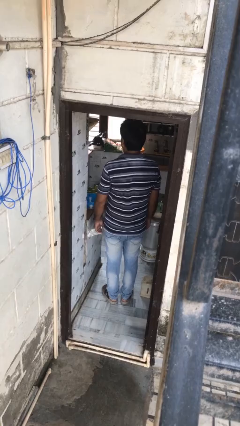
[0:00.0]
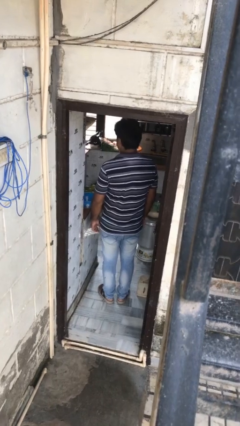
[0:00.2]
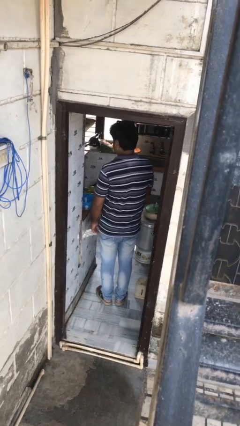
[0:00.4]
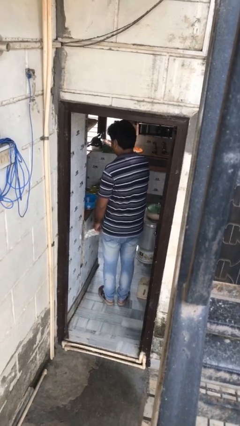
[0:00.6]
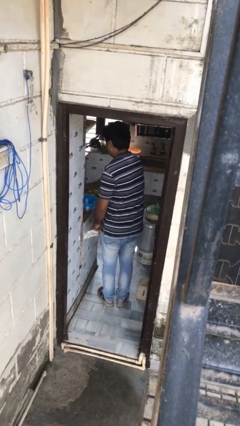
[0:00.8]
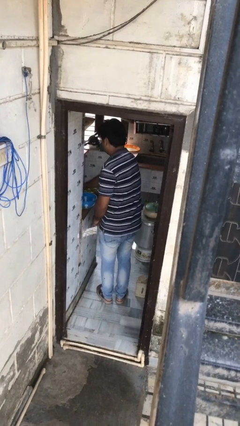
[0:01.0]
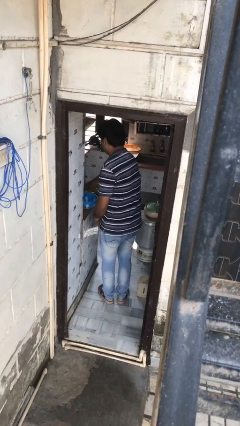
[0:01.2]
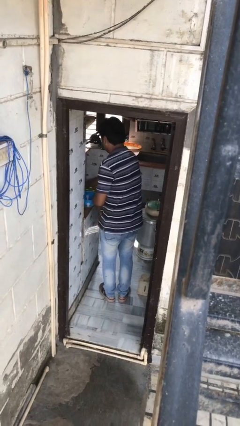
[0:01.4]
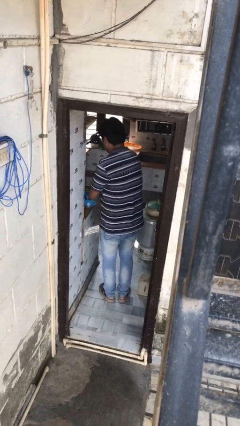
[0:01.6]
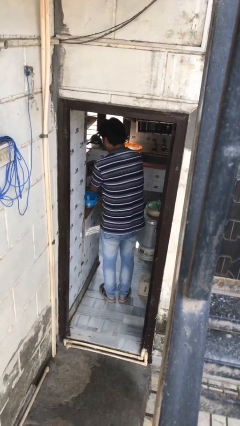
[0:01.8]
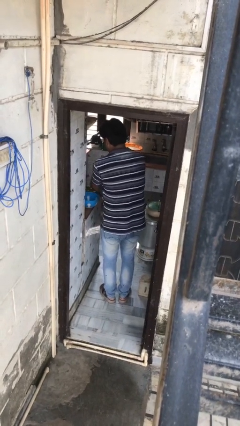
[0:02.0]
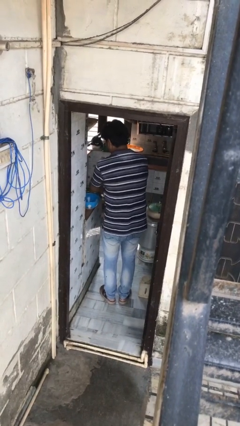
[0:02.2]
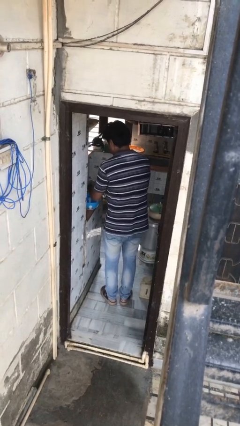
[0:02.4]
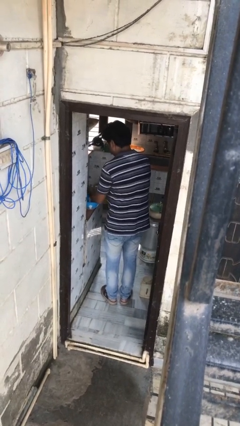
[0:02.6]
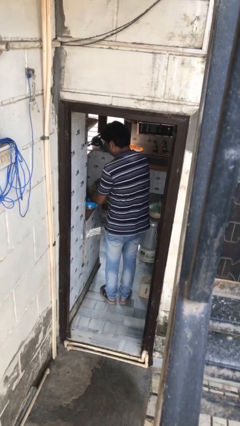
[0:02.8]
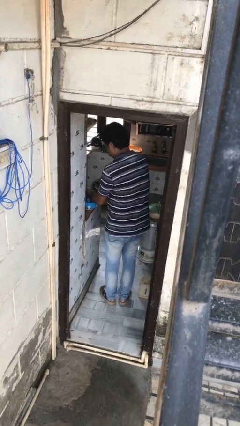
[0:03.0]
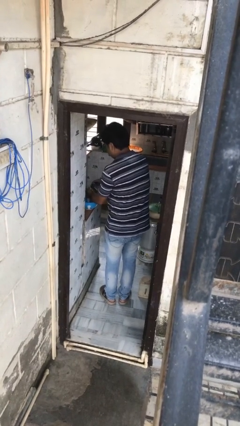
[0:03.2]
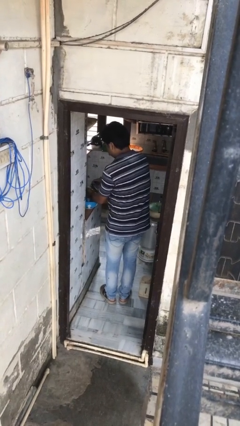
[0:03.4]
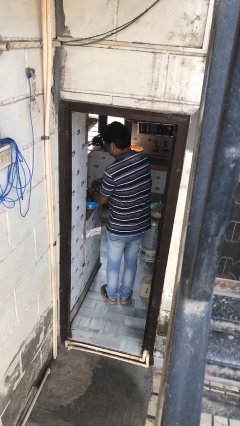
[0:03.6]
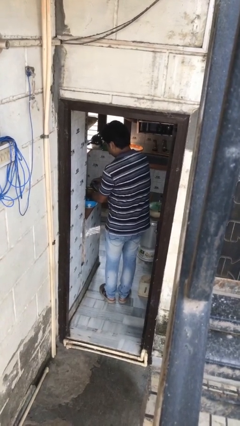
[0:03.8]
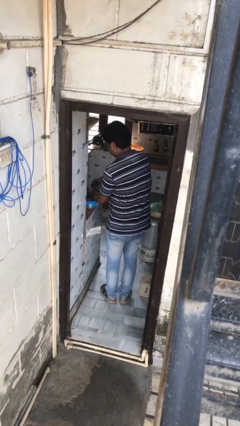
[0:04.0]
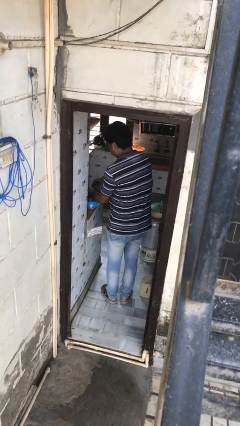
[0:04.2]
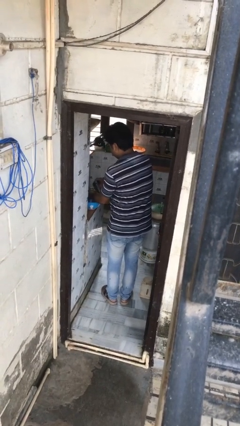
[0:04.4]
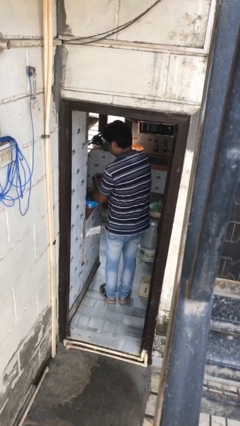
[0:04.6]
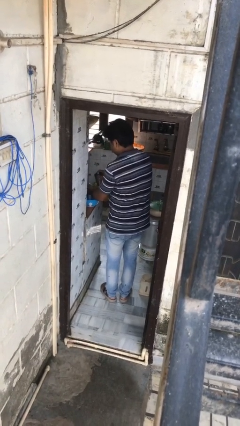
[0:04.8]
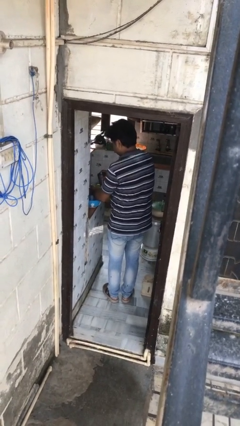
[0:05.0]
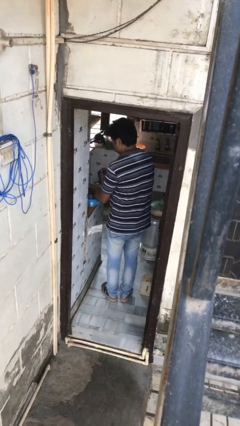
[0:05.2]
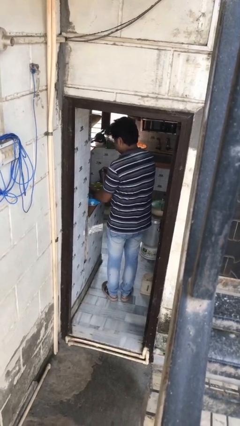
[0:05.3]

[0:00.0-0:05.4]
person washes dish

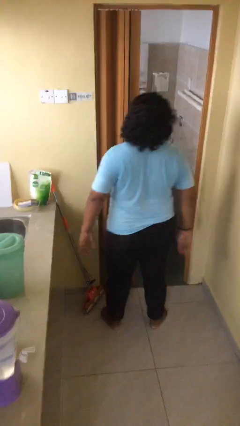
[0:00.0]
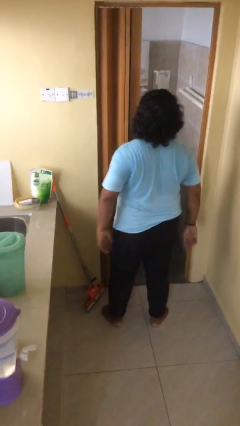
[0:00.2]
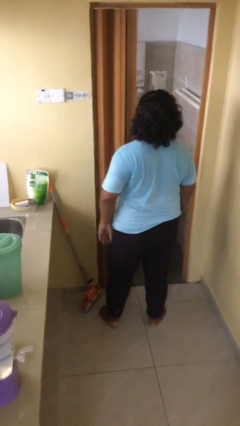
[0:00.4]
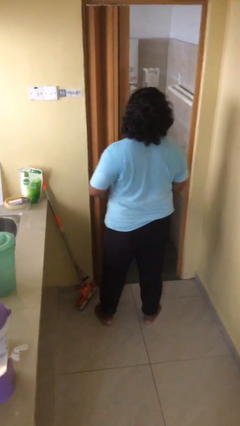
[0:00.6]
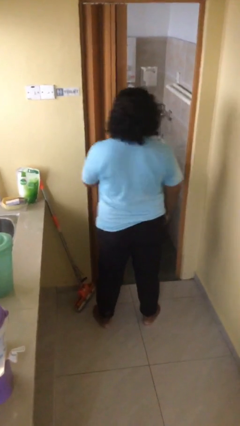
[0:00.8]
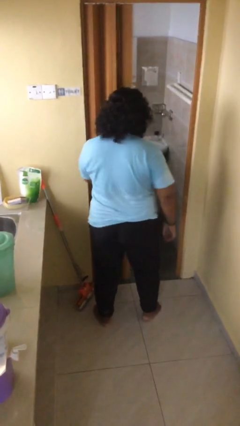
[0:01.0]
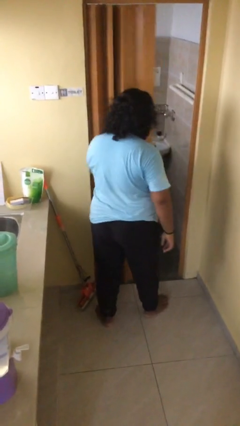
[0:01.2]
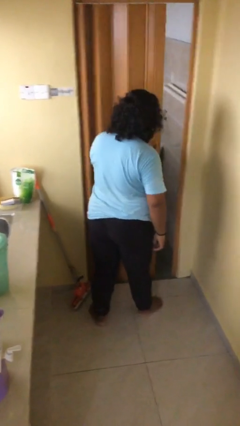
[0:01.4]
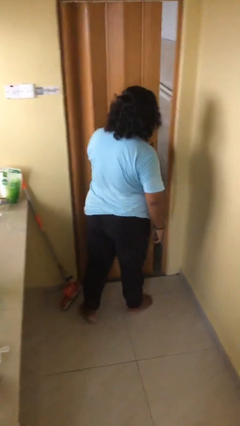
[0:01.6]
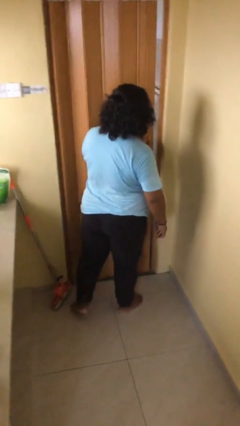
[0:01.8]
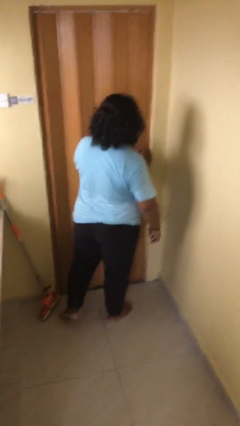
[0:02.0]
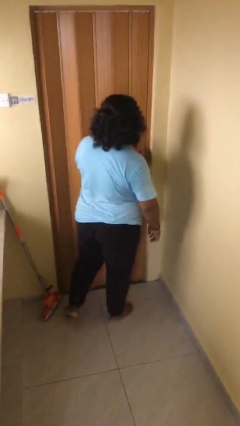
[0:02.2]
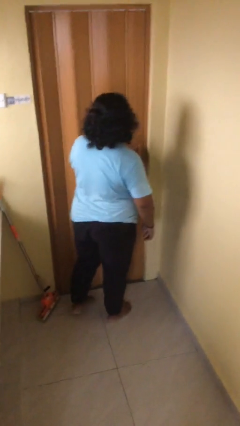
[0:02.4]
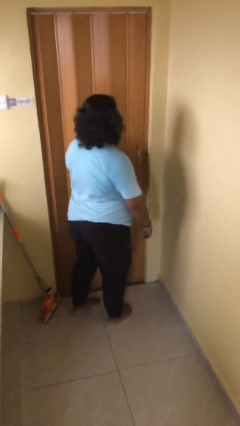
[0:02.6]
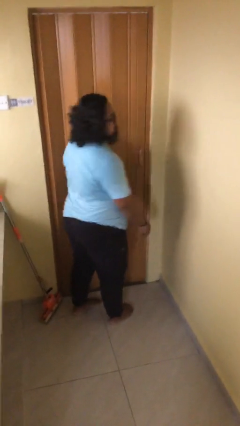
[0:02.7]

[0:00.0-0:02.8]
person closes sliding door

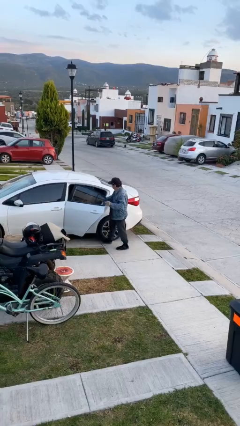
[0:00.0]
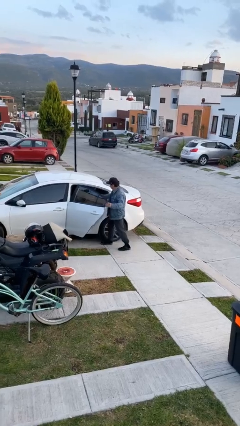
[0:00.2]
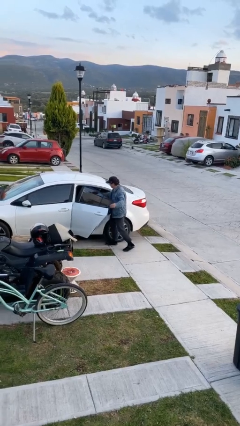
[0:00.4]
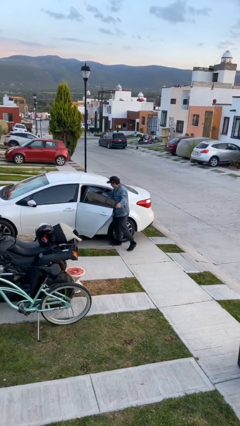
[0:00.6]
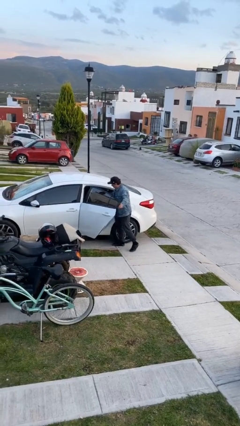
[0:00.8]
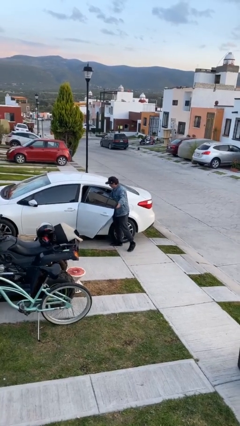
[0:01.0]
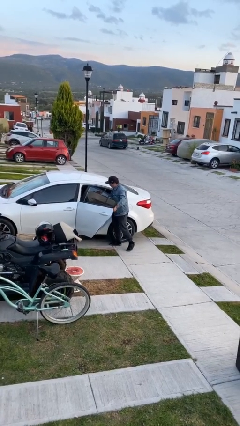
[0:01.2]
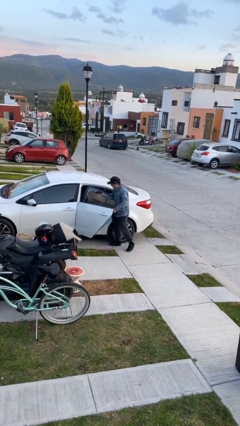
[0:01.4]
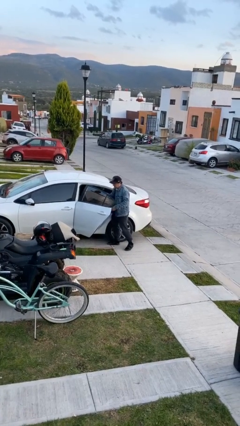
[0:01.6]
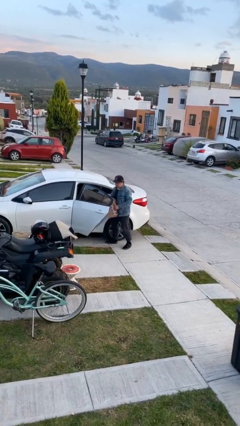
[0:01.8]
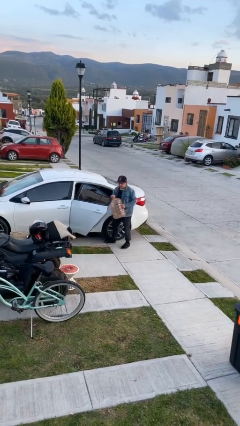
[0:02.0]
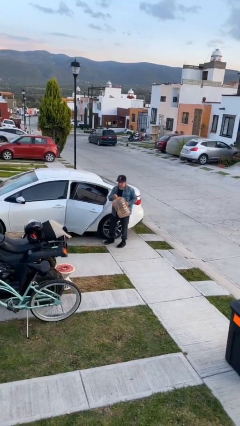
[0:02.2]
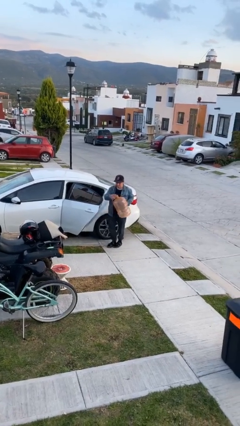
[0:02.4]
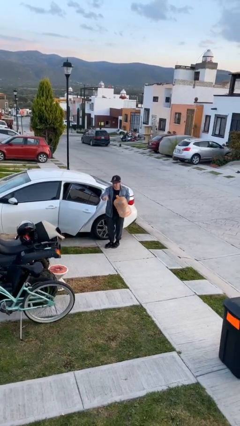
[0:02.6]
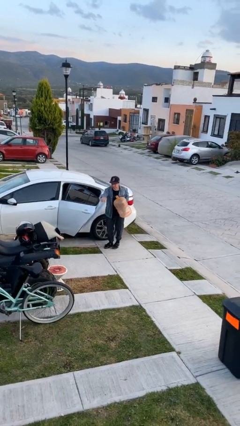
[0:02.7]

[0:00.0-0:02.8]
person unloads car

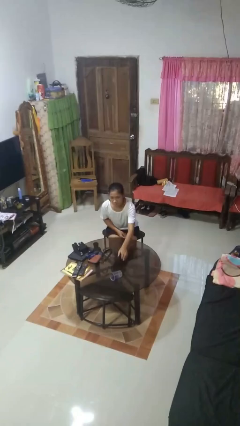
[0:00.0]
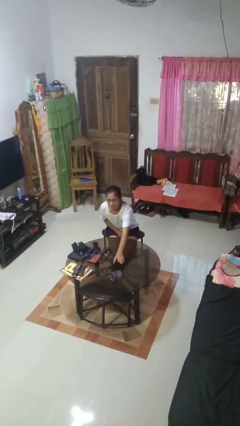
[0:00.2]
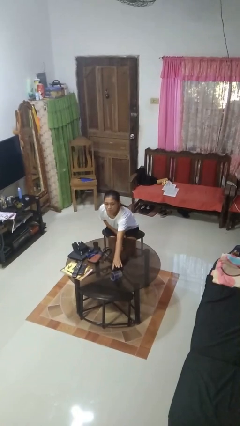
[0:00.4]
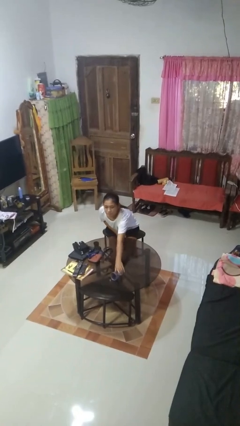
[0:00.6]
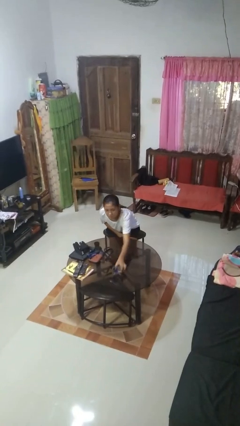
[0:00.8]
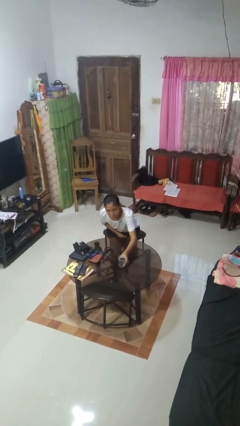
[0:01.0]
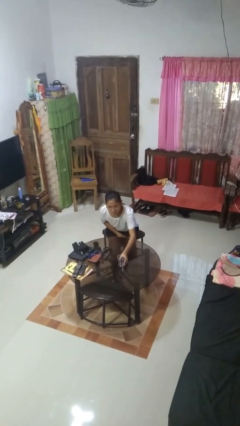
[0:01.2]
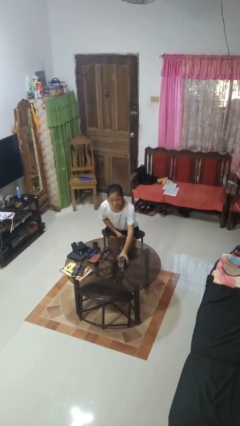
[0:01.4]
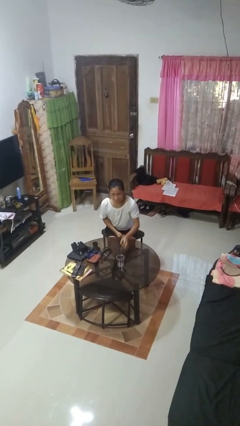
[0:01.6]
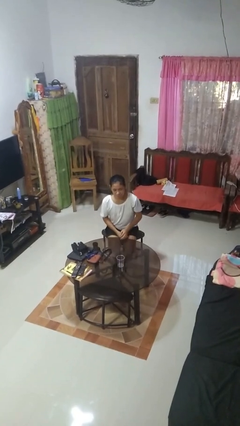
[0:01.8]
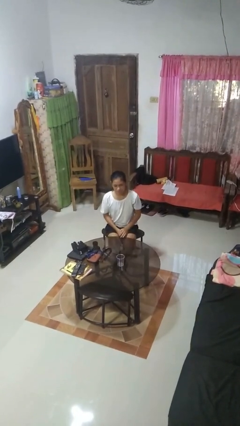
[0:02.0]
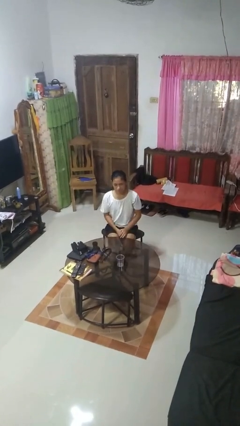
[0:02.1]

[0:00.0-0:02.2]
person sets upright glass

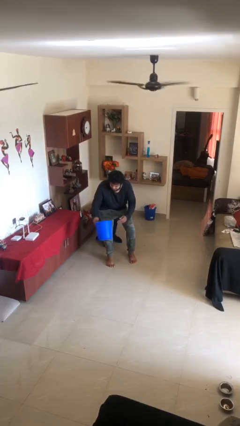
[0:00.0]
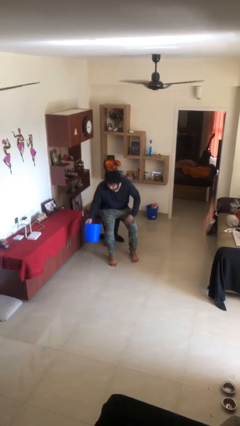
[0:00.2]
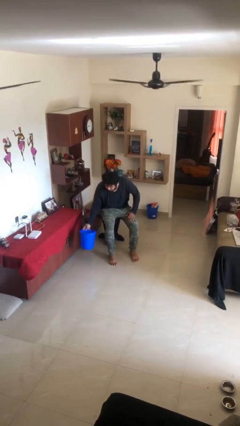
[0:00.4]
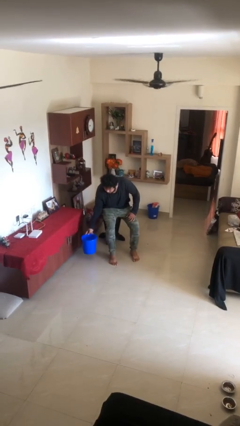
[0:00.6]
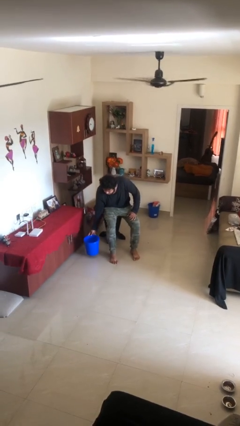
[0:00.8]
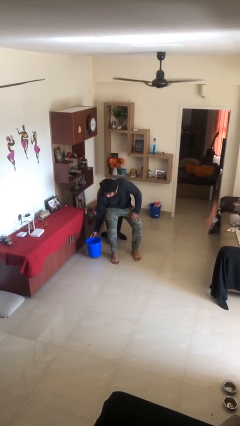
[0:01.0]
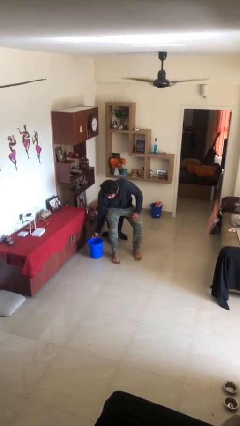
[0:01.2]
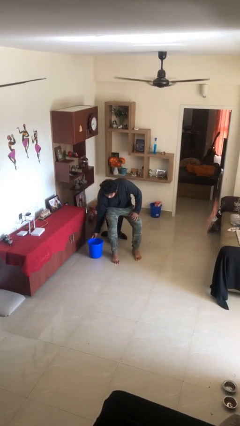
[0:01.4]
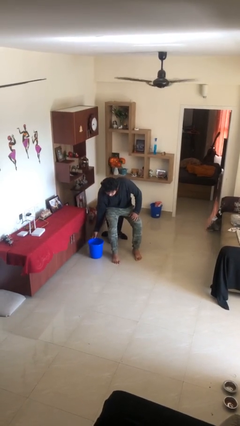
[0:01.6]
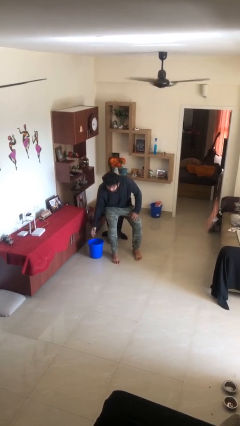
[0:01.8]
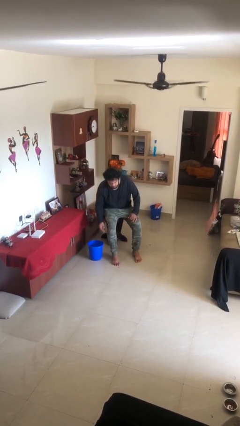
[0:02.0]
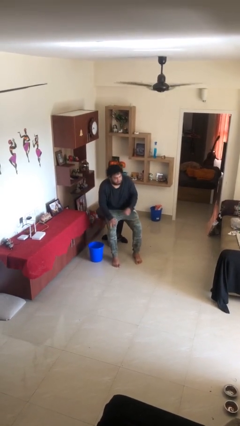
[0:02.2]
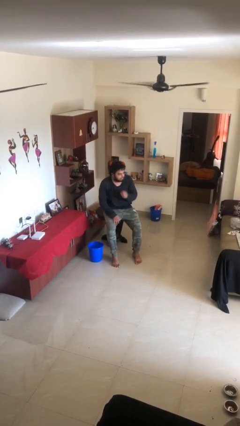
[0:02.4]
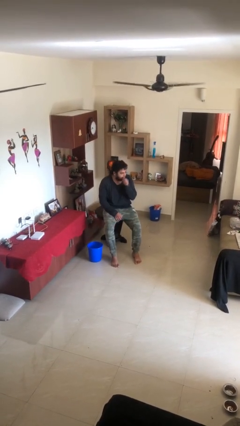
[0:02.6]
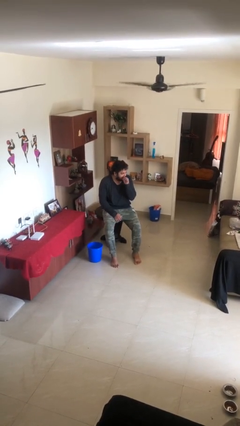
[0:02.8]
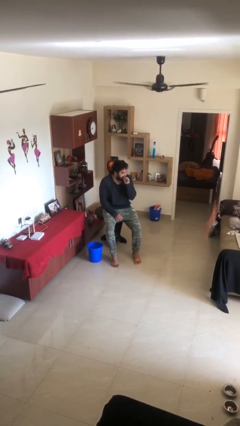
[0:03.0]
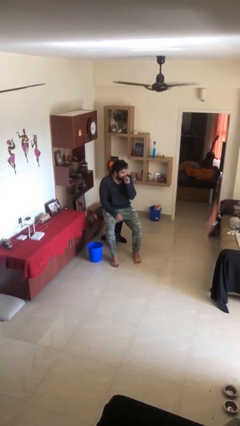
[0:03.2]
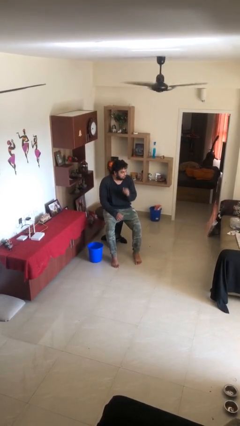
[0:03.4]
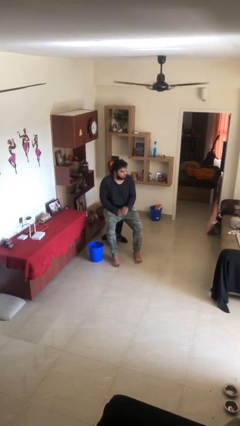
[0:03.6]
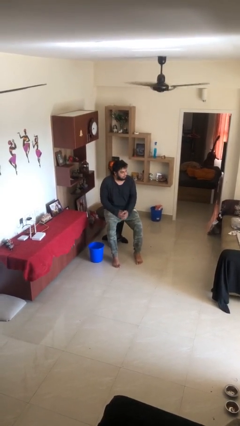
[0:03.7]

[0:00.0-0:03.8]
person puts down object on floor

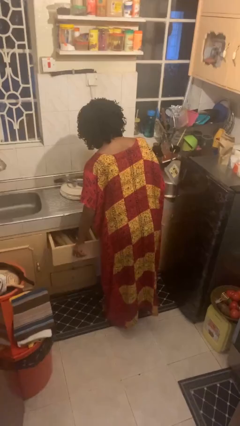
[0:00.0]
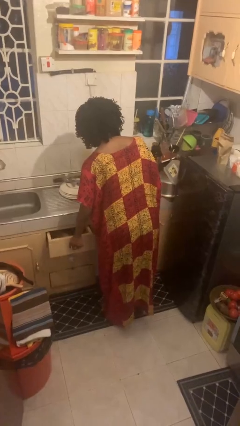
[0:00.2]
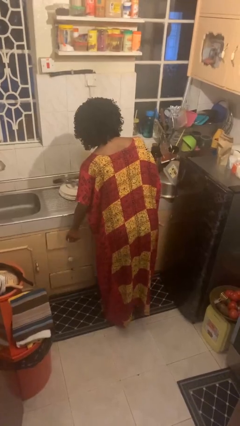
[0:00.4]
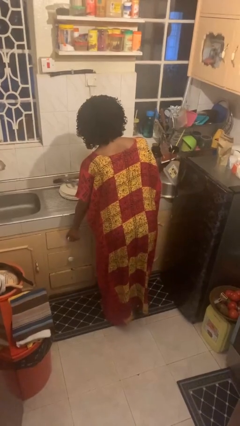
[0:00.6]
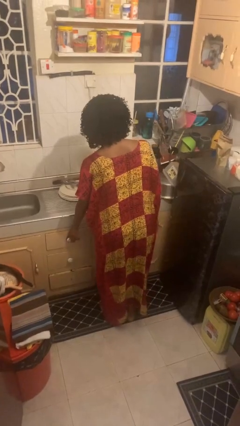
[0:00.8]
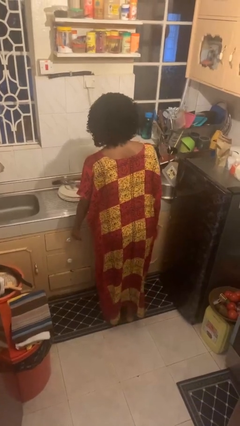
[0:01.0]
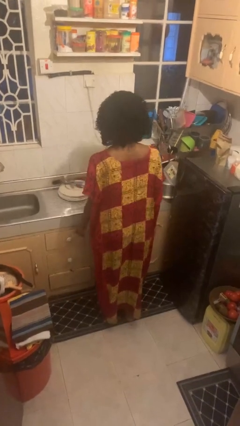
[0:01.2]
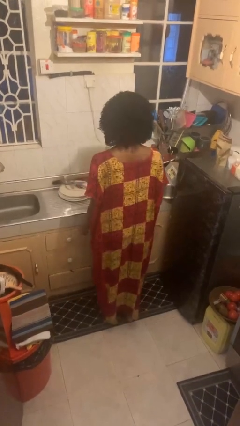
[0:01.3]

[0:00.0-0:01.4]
person closes kitchen drawer
